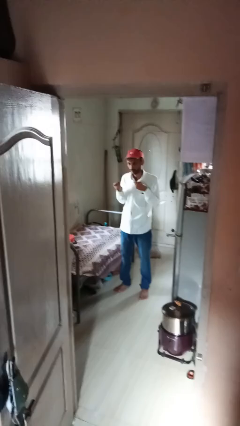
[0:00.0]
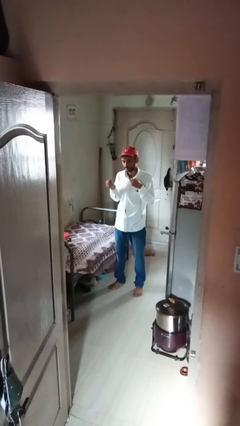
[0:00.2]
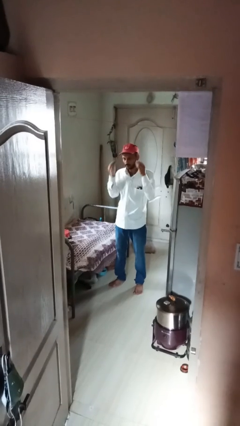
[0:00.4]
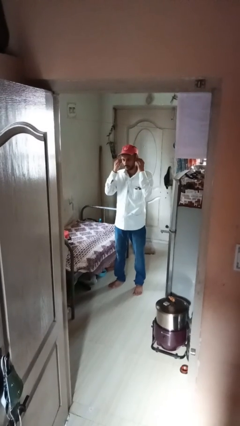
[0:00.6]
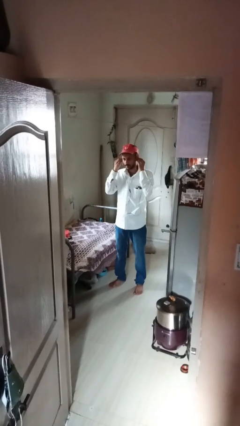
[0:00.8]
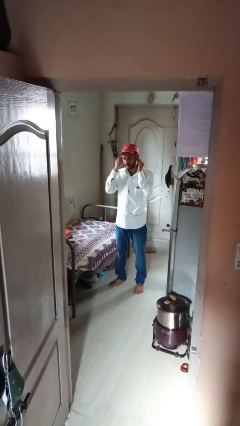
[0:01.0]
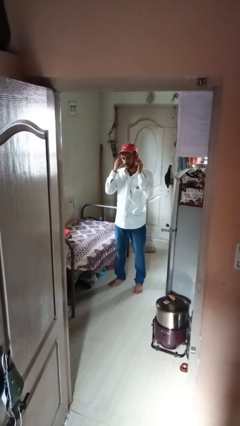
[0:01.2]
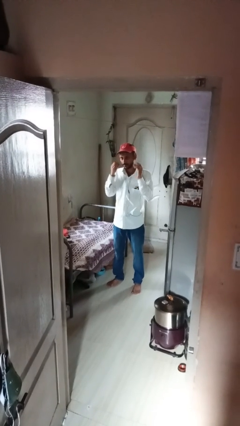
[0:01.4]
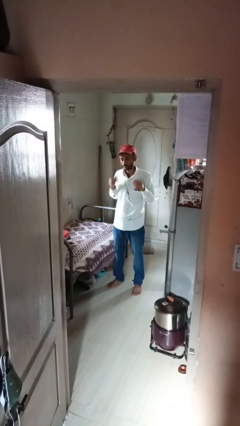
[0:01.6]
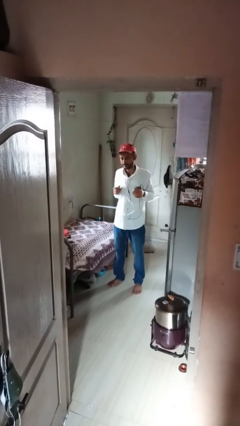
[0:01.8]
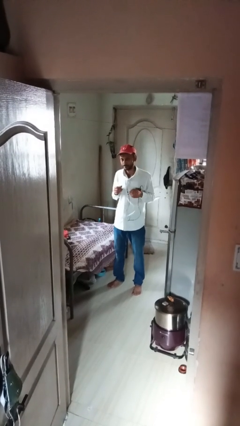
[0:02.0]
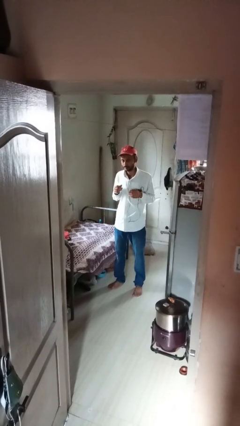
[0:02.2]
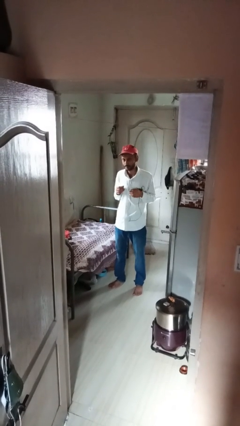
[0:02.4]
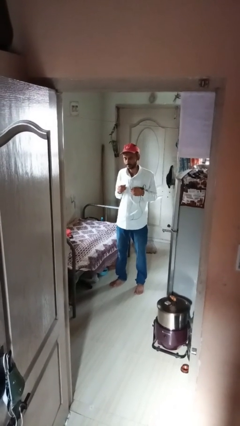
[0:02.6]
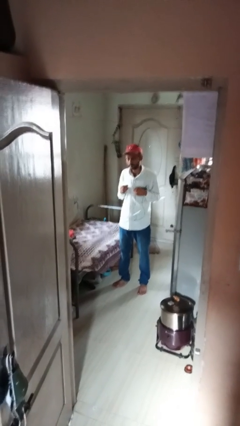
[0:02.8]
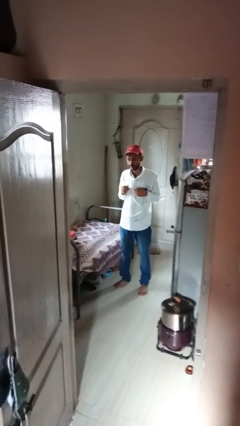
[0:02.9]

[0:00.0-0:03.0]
person puts on headphones

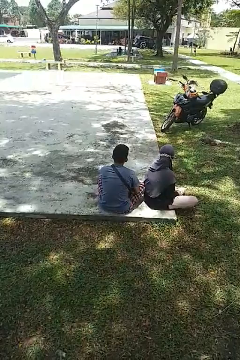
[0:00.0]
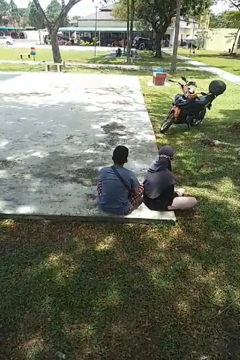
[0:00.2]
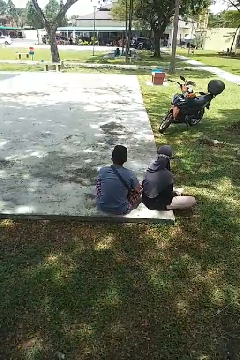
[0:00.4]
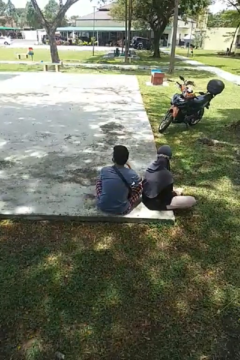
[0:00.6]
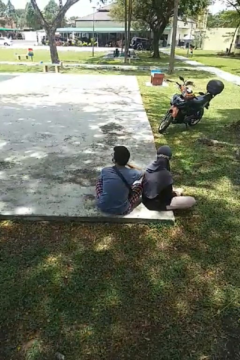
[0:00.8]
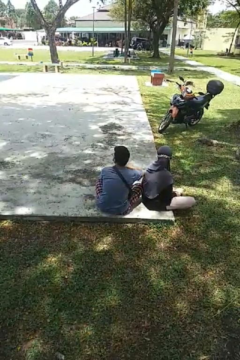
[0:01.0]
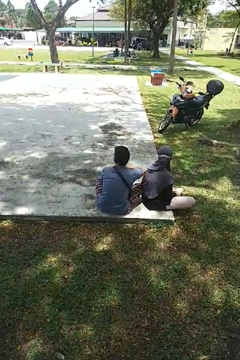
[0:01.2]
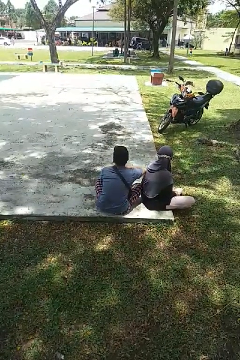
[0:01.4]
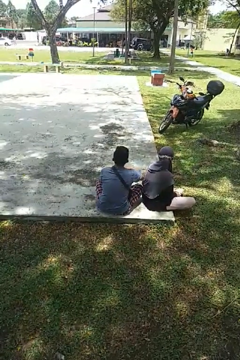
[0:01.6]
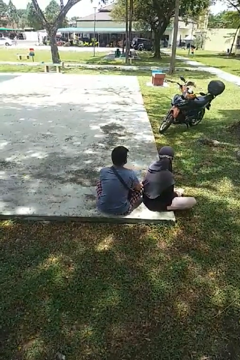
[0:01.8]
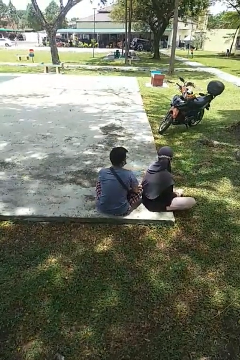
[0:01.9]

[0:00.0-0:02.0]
person nudges person with elbow

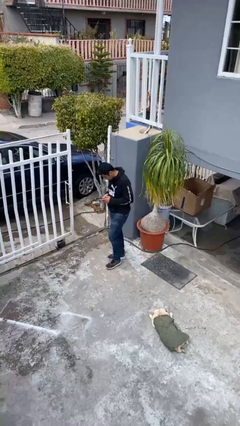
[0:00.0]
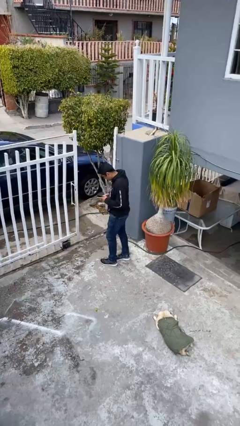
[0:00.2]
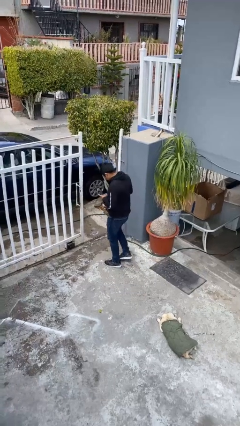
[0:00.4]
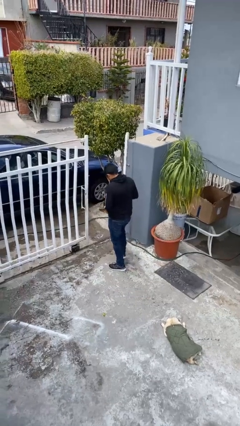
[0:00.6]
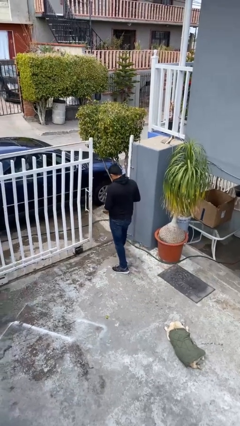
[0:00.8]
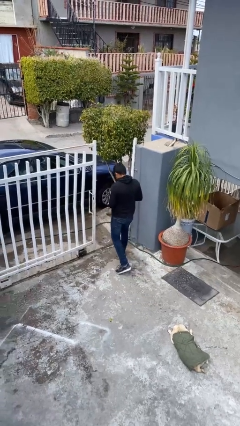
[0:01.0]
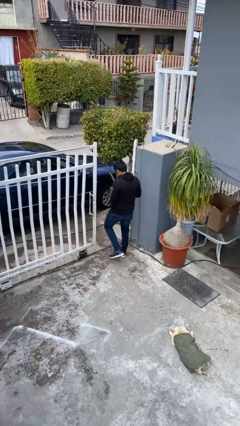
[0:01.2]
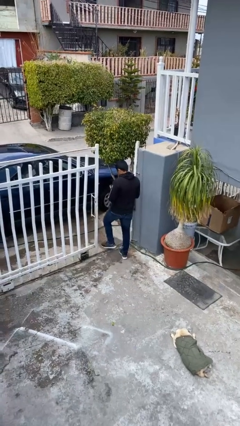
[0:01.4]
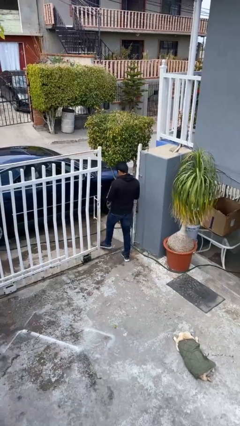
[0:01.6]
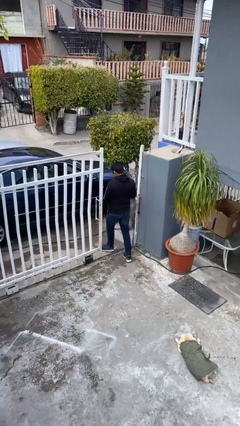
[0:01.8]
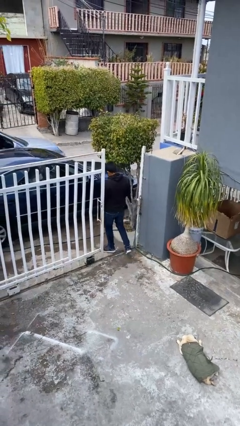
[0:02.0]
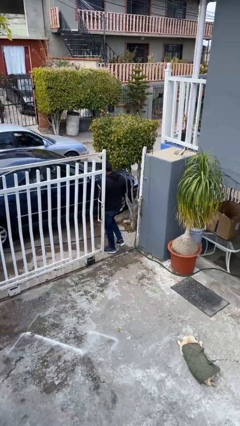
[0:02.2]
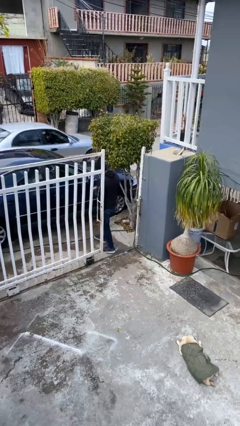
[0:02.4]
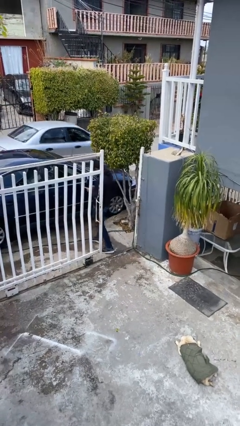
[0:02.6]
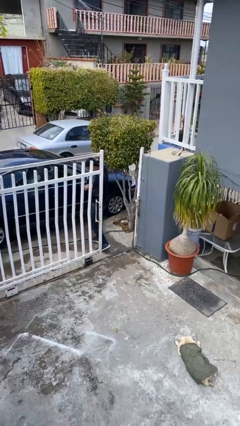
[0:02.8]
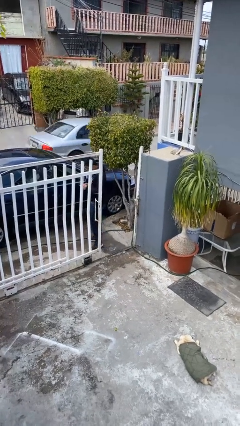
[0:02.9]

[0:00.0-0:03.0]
person exits scene through structure

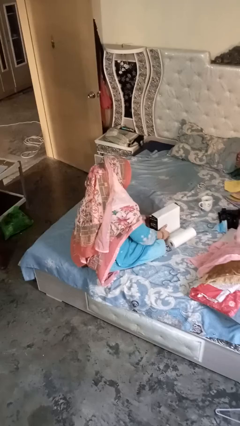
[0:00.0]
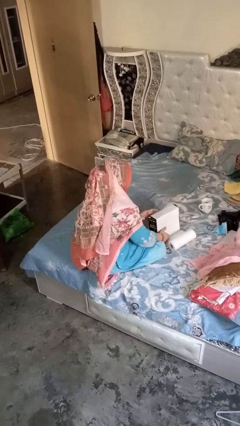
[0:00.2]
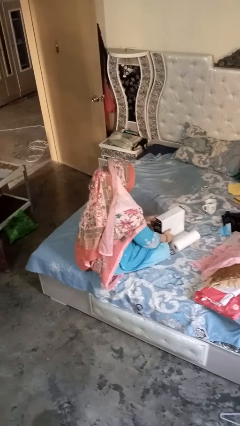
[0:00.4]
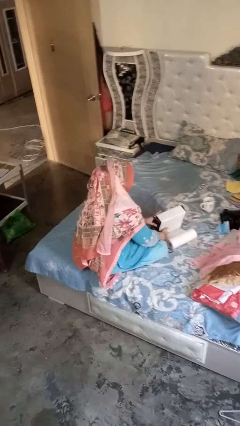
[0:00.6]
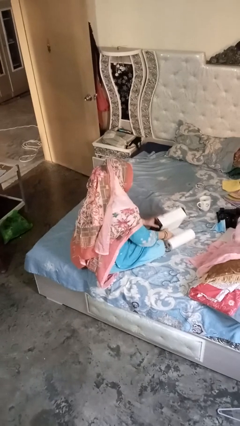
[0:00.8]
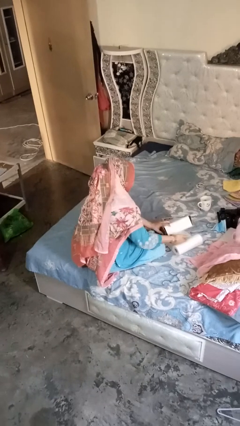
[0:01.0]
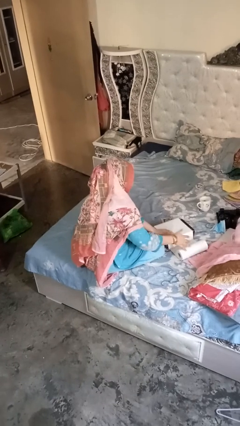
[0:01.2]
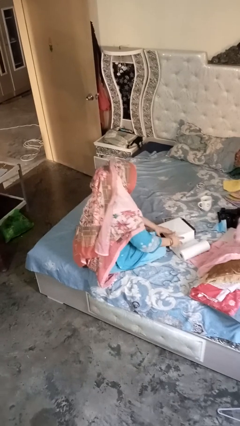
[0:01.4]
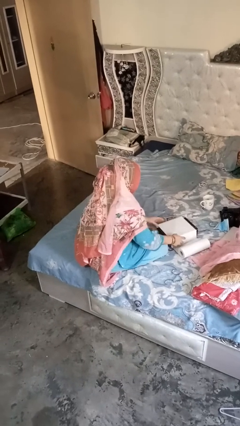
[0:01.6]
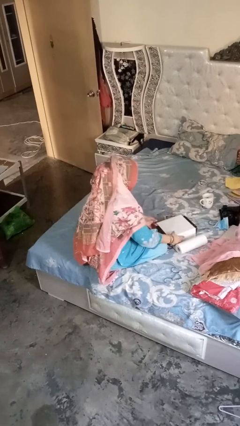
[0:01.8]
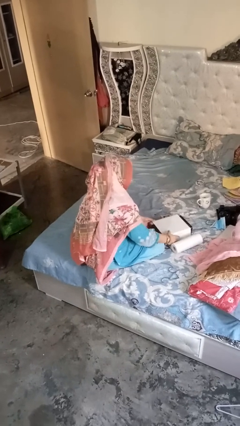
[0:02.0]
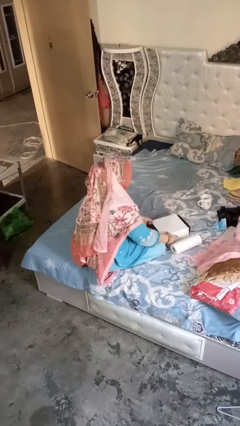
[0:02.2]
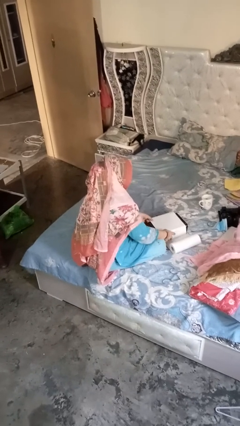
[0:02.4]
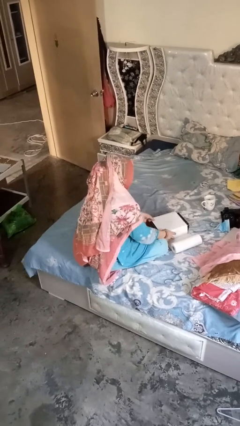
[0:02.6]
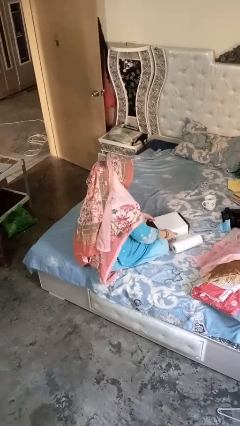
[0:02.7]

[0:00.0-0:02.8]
person wraps box

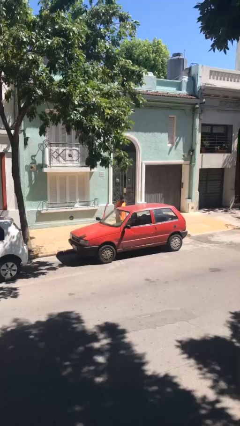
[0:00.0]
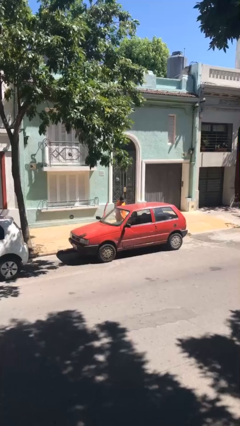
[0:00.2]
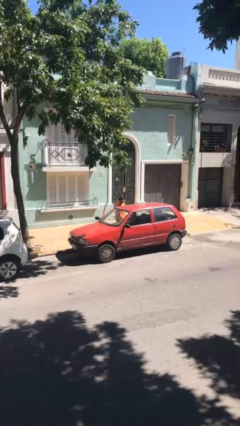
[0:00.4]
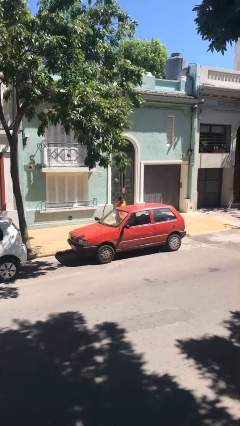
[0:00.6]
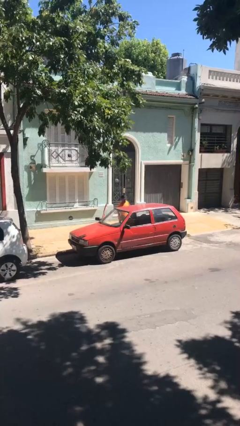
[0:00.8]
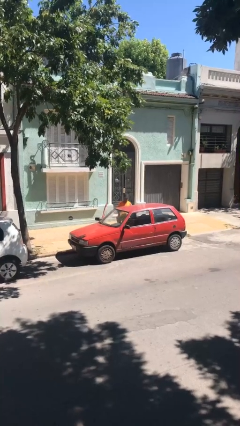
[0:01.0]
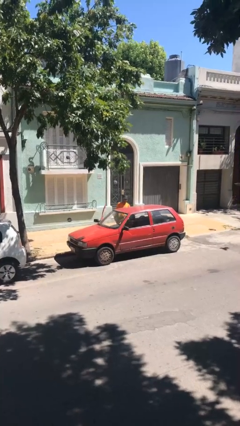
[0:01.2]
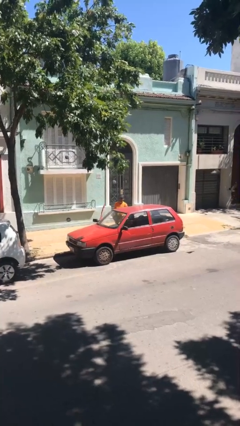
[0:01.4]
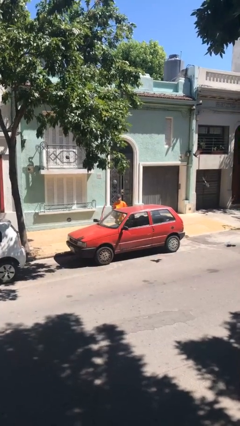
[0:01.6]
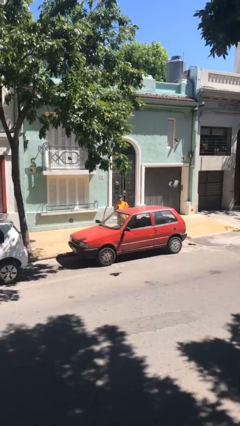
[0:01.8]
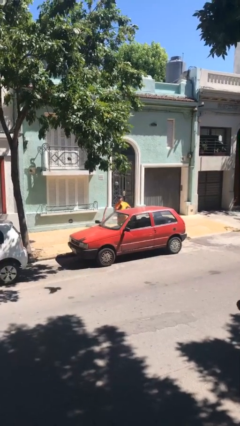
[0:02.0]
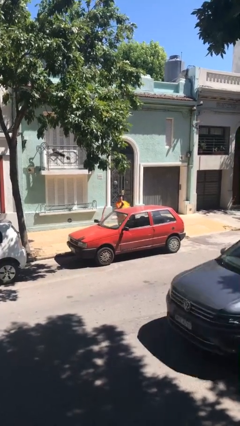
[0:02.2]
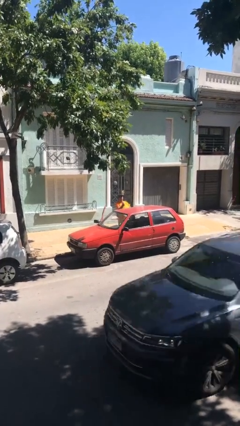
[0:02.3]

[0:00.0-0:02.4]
person unloads car

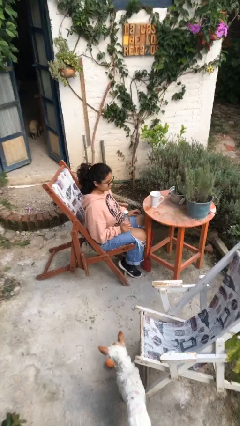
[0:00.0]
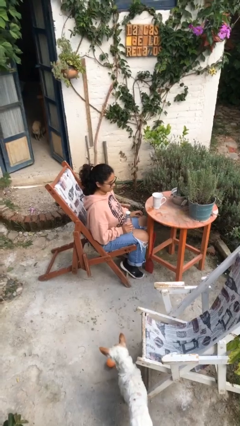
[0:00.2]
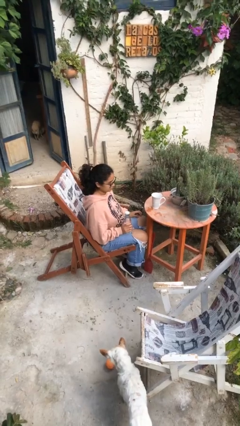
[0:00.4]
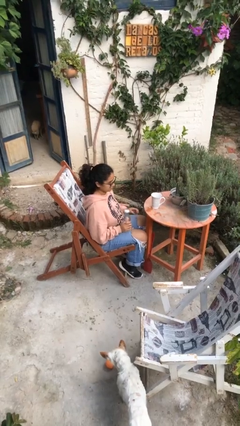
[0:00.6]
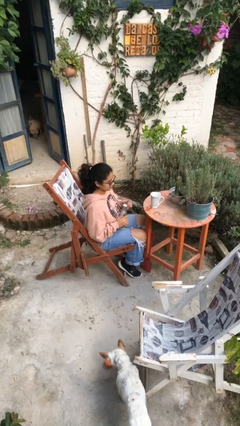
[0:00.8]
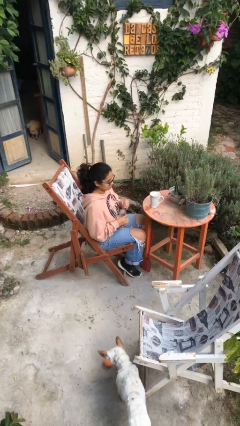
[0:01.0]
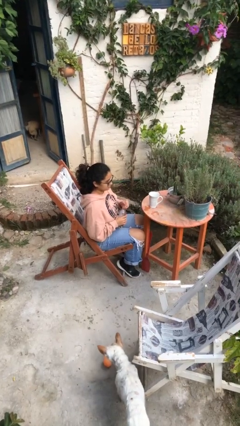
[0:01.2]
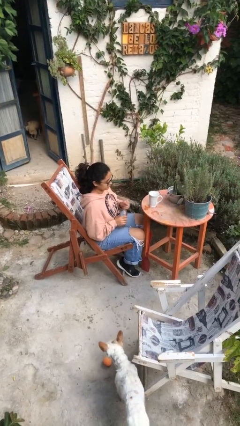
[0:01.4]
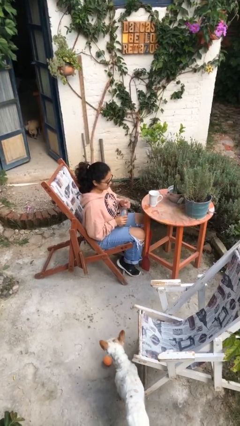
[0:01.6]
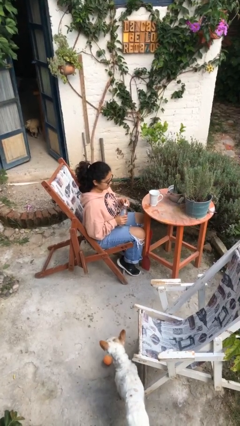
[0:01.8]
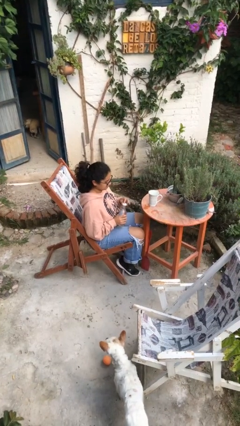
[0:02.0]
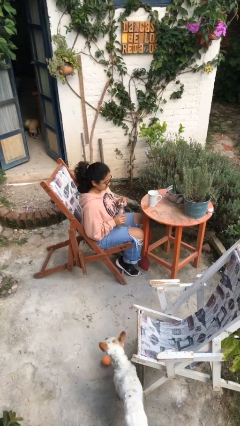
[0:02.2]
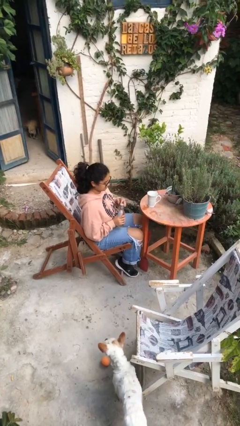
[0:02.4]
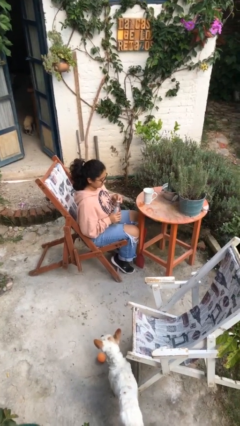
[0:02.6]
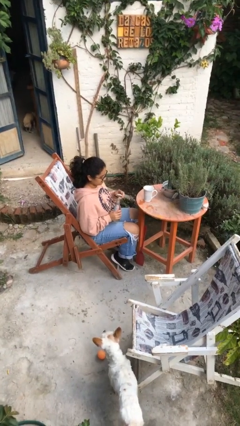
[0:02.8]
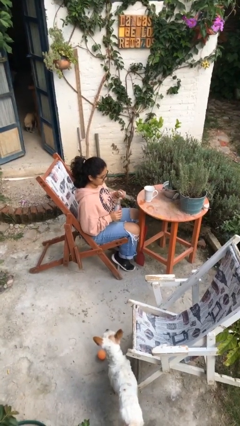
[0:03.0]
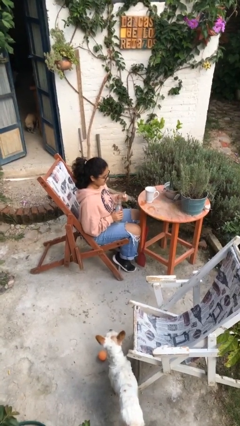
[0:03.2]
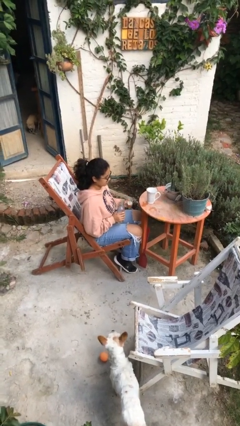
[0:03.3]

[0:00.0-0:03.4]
person unscrews lid from bottle

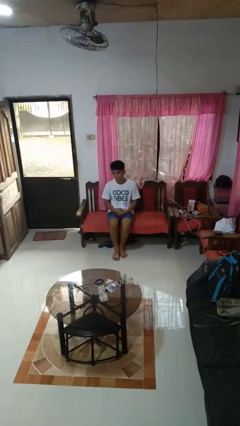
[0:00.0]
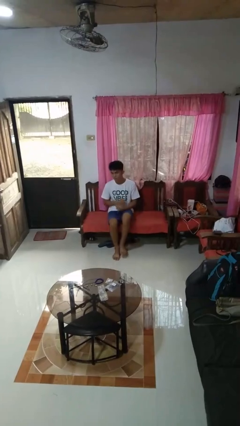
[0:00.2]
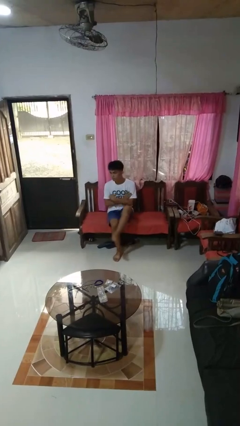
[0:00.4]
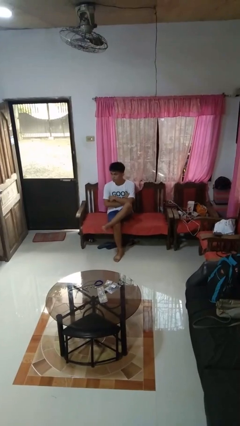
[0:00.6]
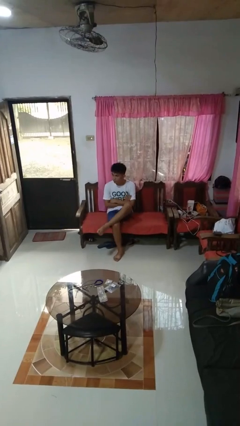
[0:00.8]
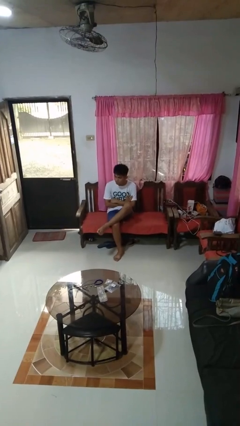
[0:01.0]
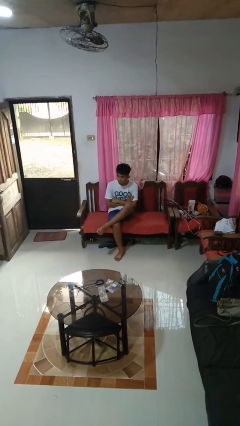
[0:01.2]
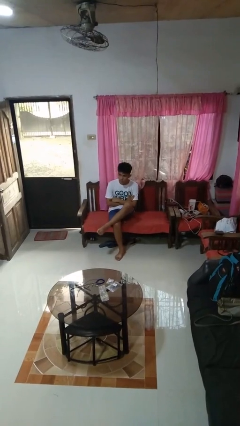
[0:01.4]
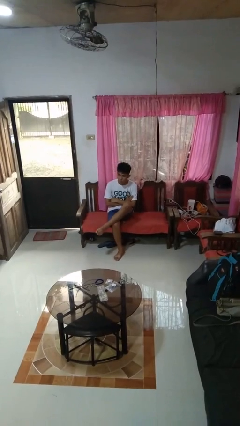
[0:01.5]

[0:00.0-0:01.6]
person crosses legs
